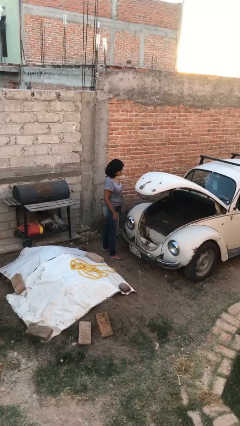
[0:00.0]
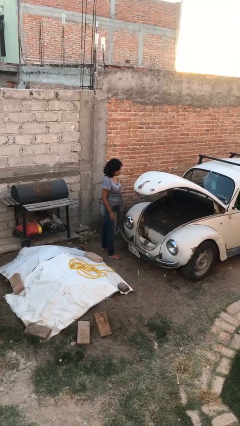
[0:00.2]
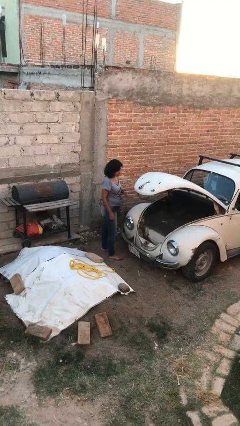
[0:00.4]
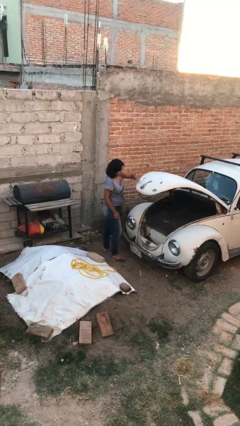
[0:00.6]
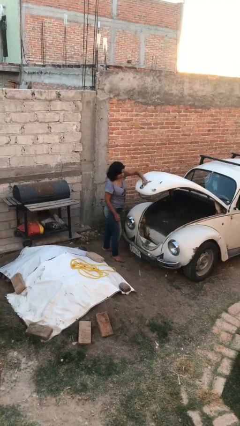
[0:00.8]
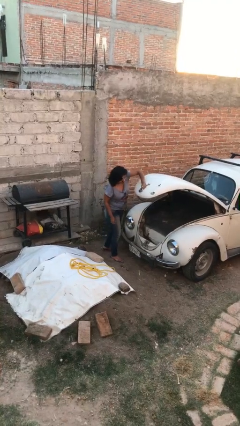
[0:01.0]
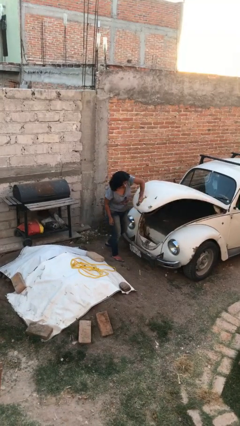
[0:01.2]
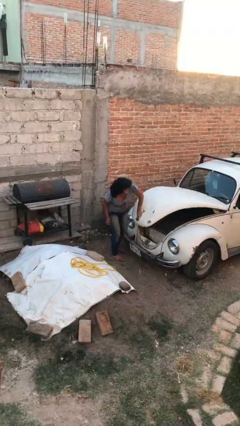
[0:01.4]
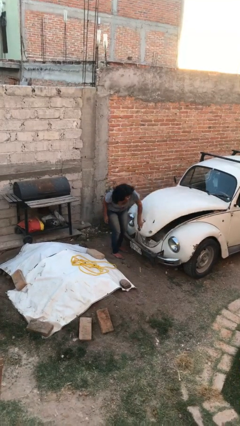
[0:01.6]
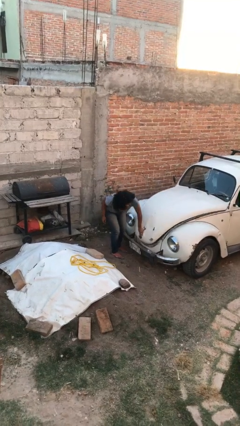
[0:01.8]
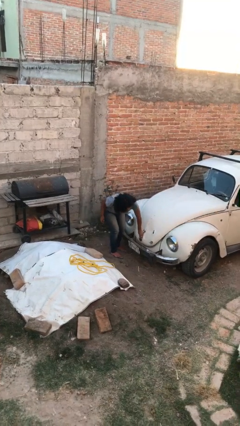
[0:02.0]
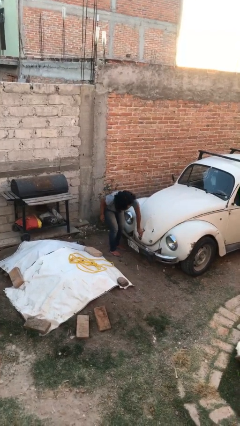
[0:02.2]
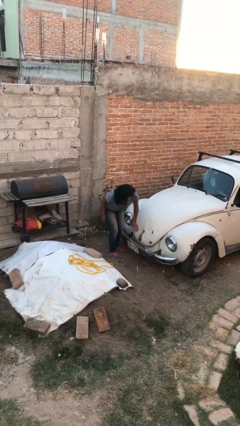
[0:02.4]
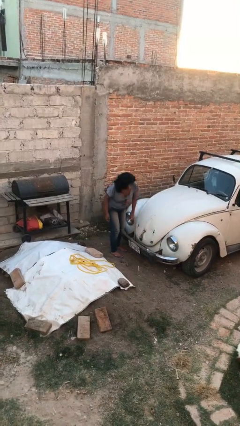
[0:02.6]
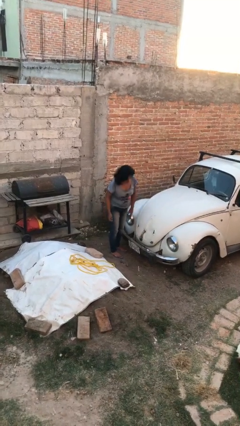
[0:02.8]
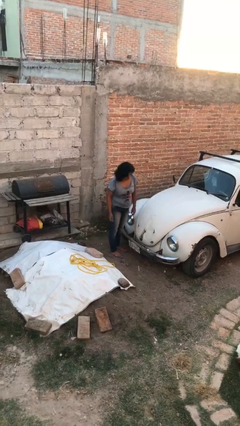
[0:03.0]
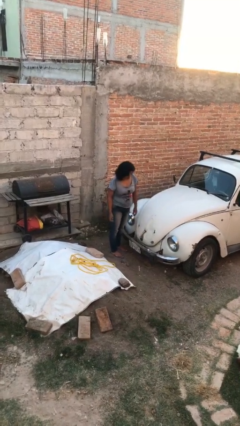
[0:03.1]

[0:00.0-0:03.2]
person closes car trunk

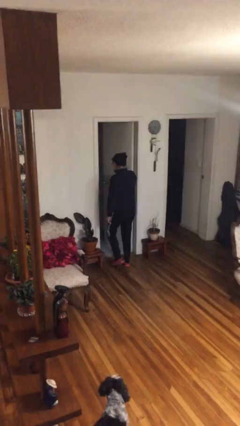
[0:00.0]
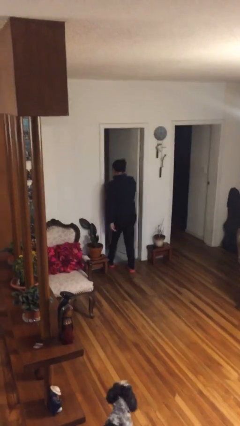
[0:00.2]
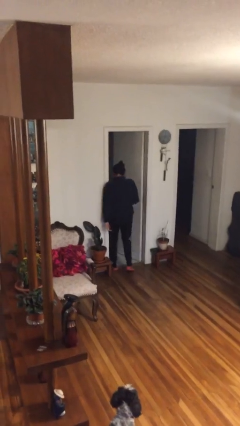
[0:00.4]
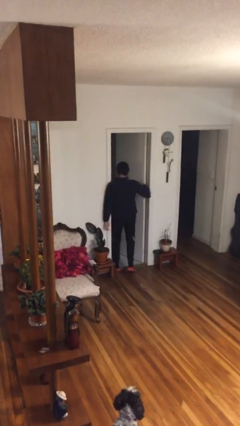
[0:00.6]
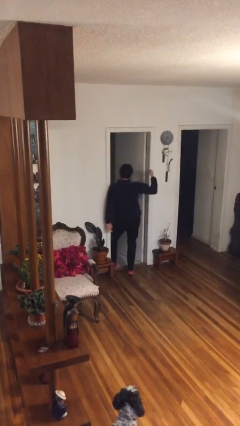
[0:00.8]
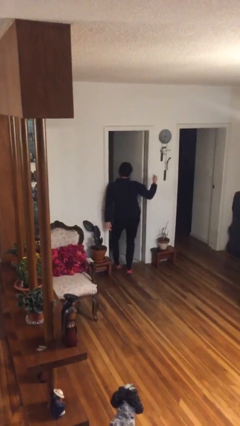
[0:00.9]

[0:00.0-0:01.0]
person bumps into wall

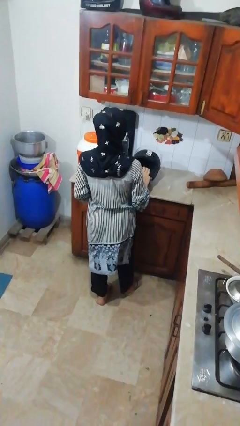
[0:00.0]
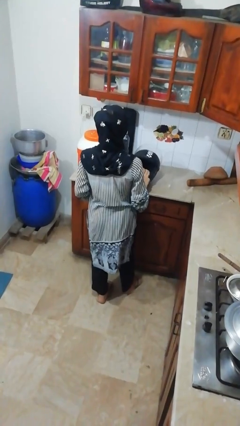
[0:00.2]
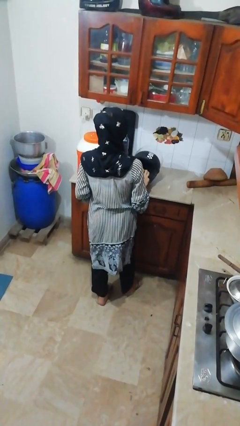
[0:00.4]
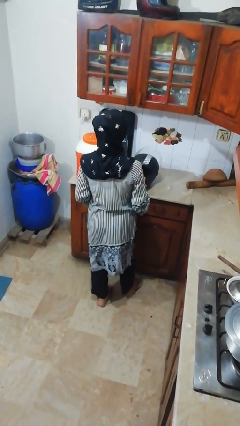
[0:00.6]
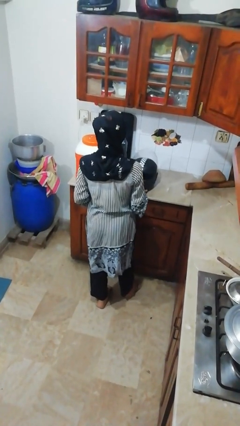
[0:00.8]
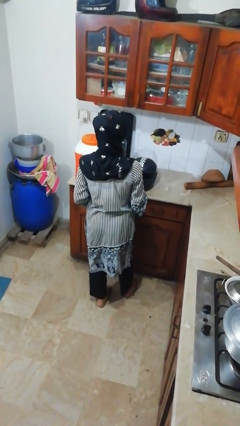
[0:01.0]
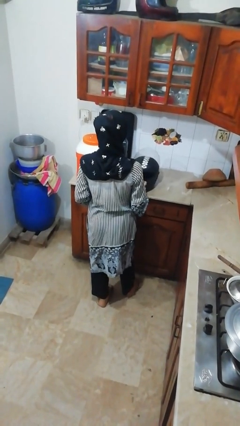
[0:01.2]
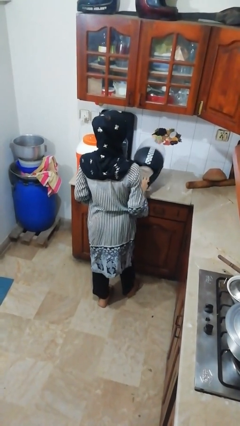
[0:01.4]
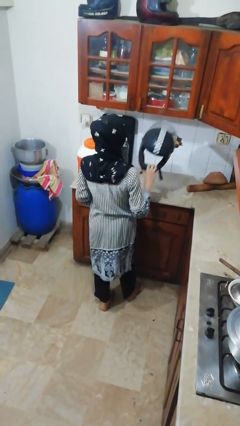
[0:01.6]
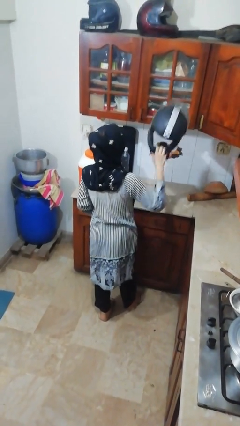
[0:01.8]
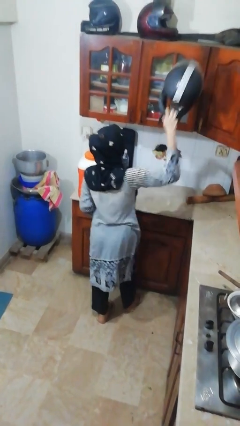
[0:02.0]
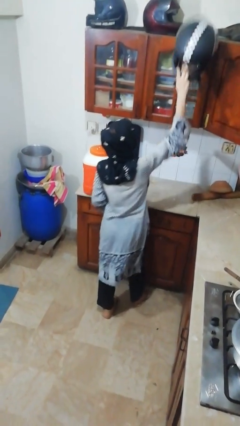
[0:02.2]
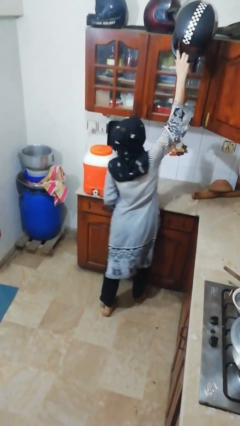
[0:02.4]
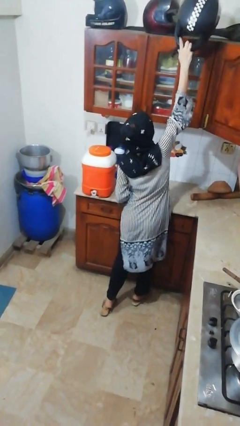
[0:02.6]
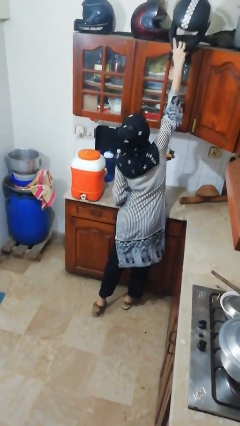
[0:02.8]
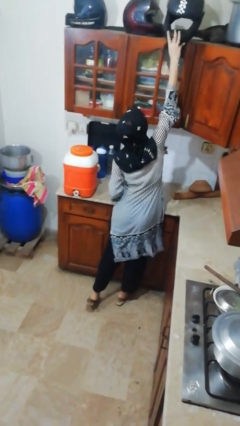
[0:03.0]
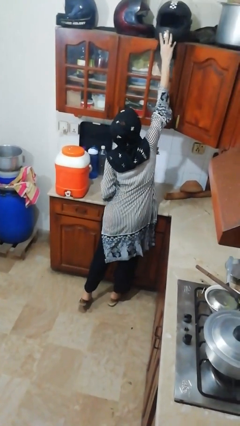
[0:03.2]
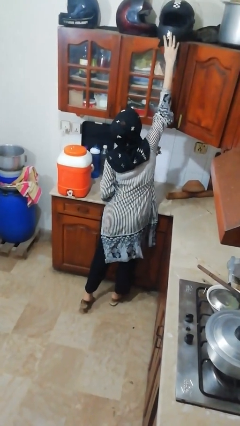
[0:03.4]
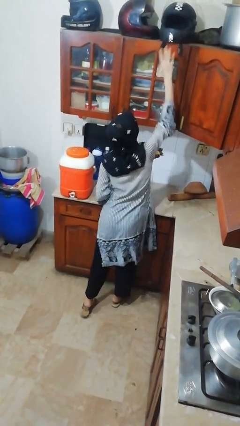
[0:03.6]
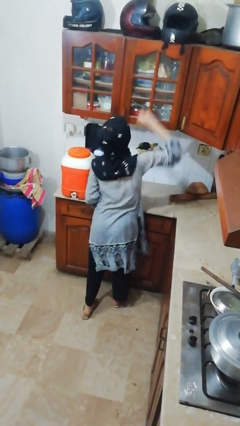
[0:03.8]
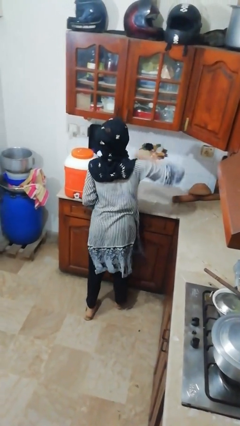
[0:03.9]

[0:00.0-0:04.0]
person puts down object on shelf

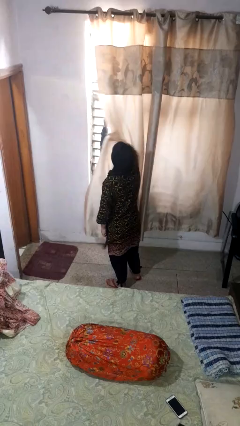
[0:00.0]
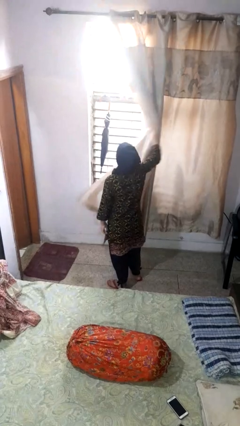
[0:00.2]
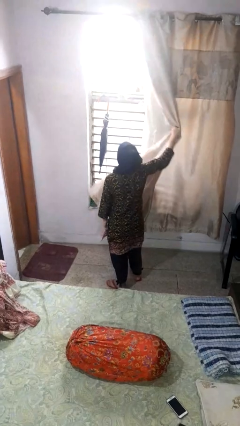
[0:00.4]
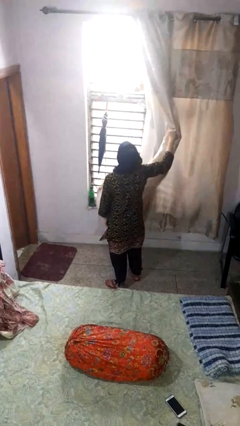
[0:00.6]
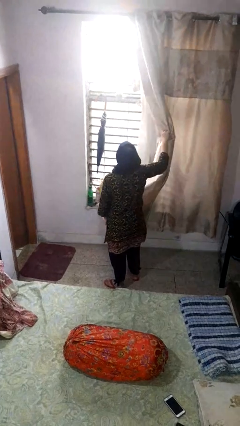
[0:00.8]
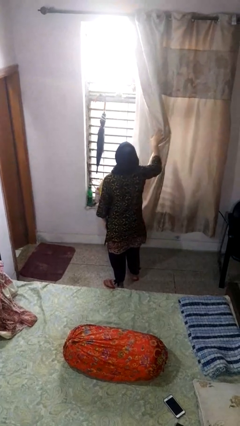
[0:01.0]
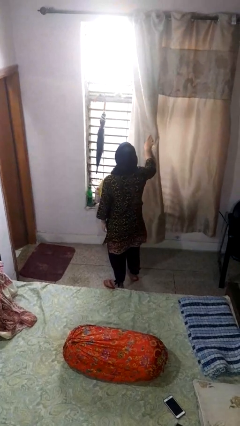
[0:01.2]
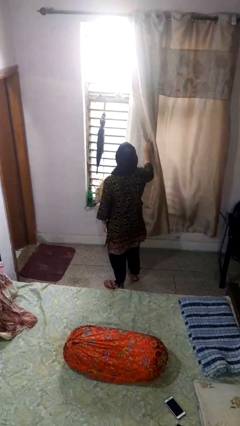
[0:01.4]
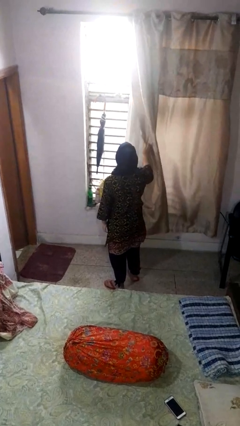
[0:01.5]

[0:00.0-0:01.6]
person opens curtains

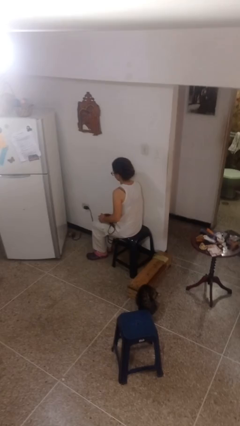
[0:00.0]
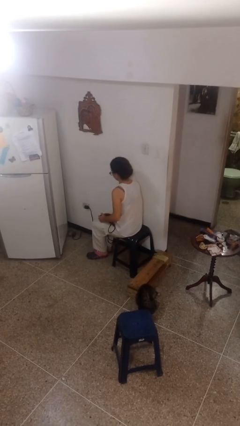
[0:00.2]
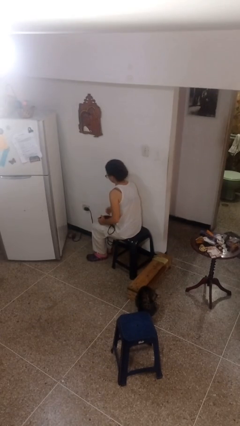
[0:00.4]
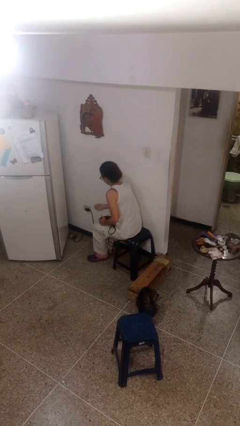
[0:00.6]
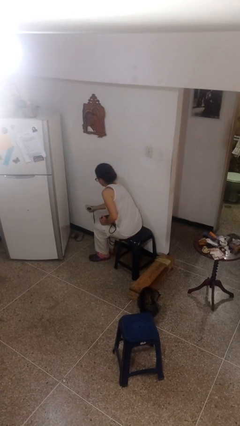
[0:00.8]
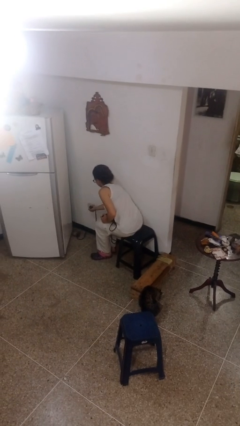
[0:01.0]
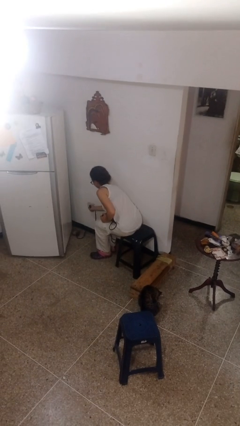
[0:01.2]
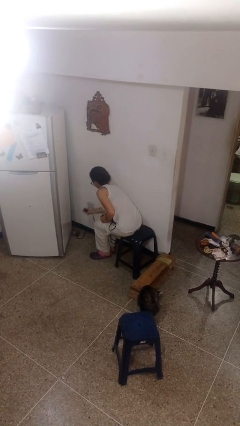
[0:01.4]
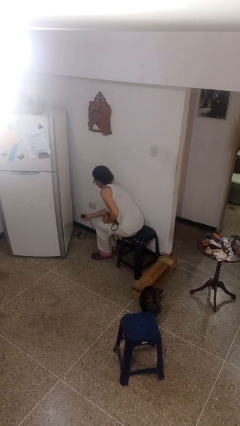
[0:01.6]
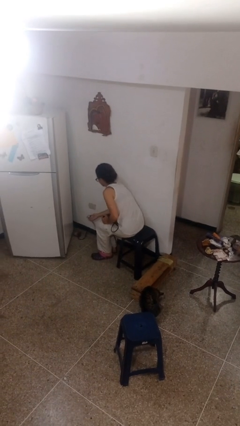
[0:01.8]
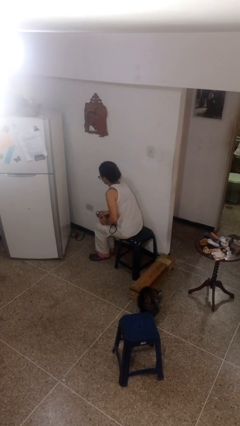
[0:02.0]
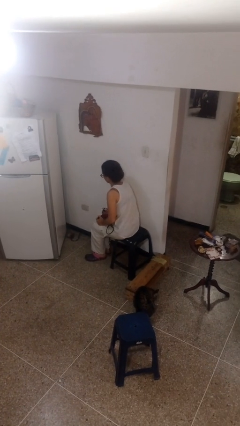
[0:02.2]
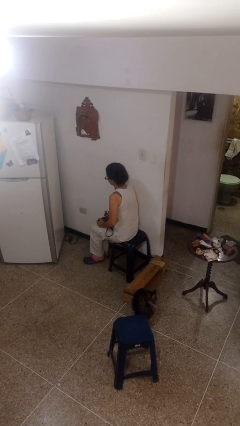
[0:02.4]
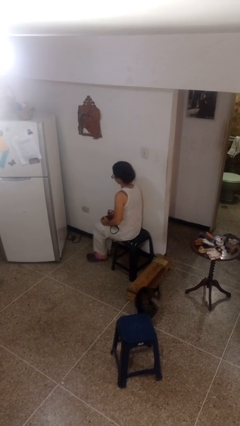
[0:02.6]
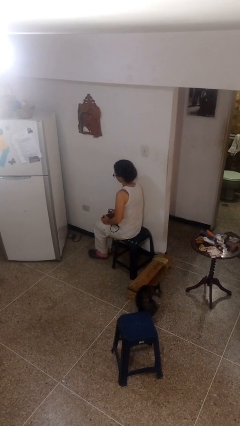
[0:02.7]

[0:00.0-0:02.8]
person unplugs from electrical socket

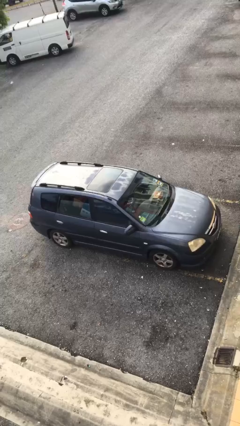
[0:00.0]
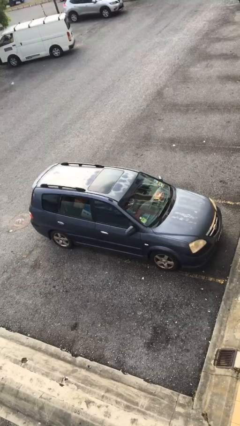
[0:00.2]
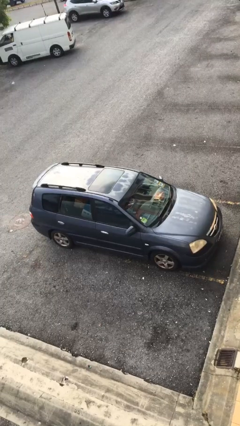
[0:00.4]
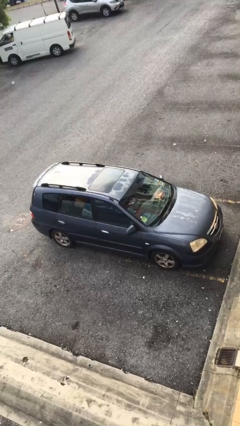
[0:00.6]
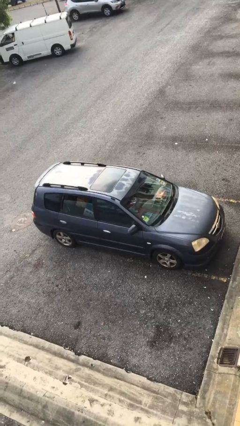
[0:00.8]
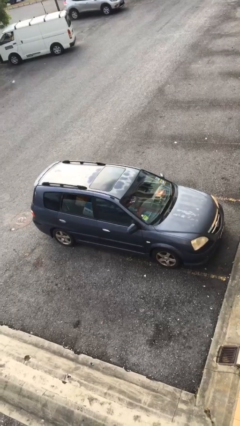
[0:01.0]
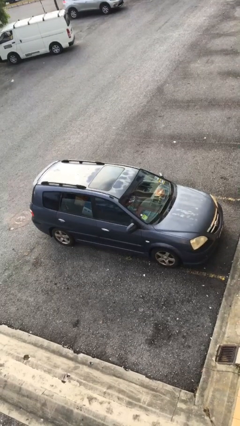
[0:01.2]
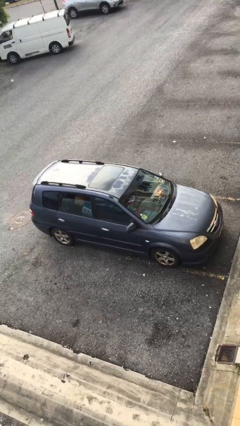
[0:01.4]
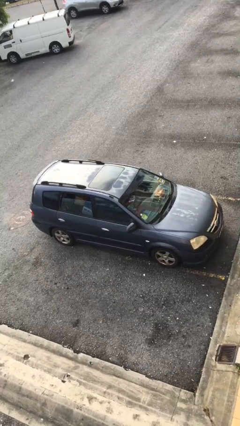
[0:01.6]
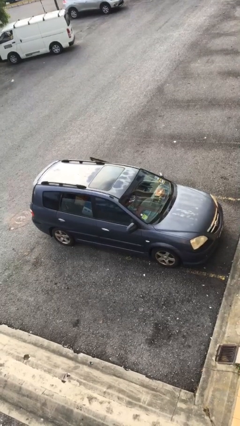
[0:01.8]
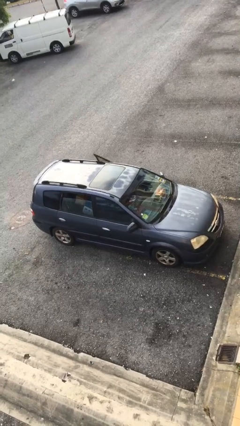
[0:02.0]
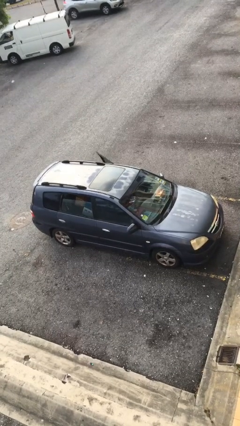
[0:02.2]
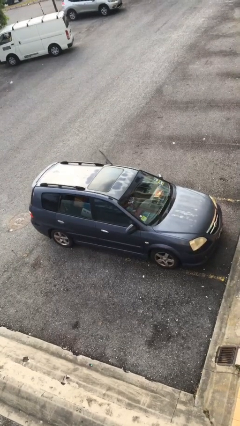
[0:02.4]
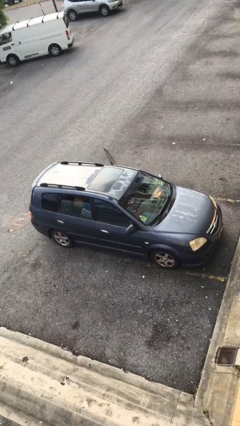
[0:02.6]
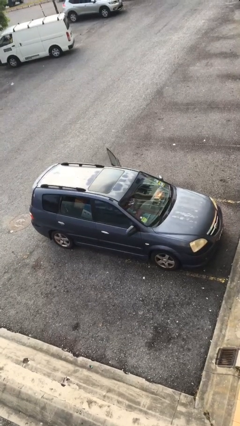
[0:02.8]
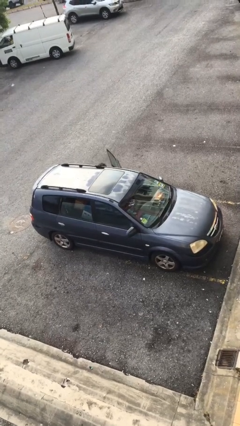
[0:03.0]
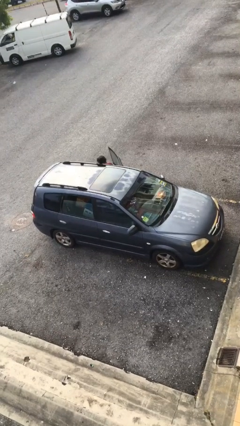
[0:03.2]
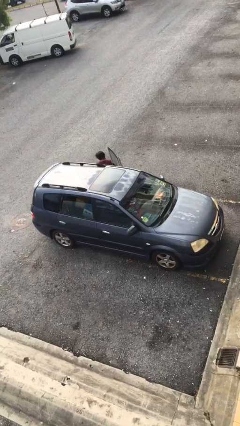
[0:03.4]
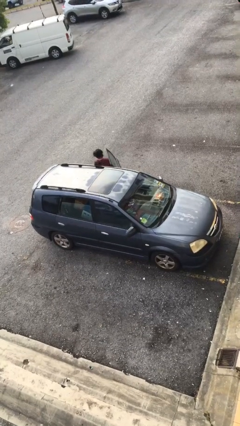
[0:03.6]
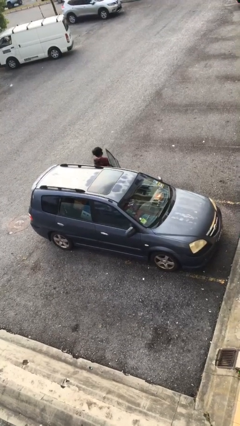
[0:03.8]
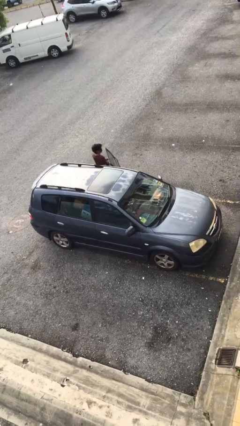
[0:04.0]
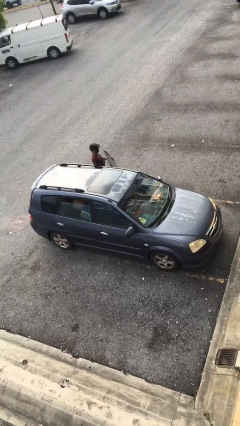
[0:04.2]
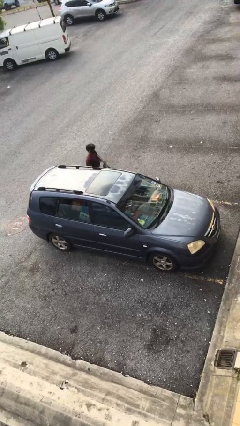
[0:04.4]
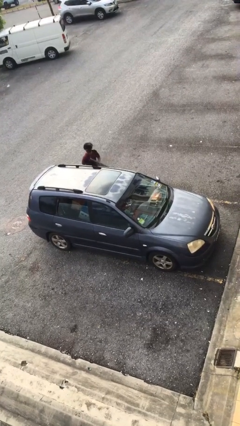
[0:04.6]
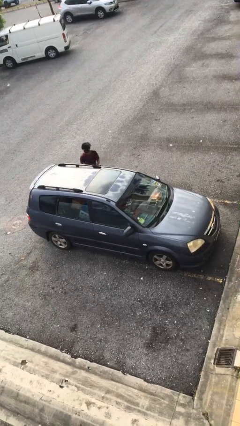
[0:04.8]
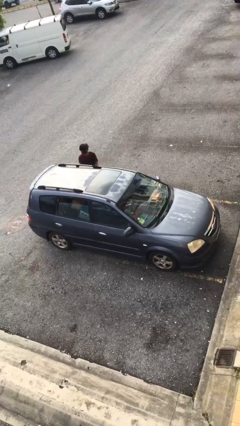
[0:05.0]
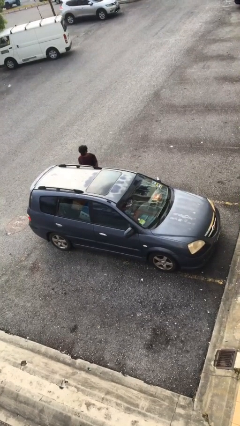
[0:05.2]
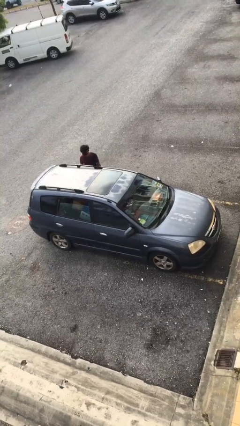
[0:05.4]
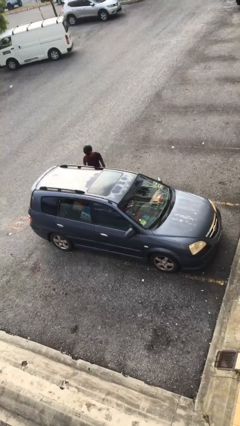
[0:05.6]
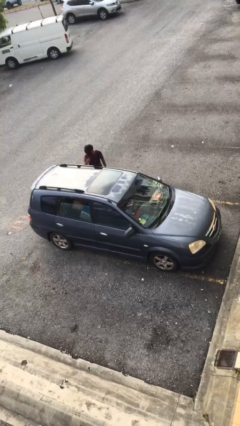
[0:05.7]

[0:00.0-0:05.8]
car drops off person
